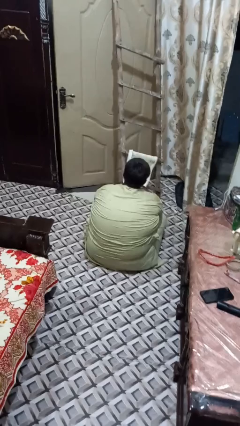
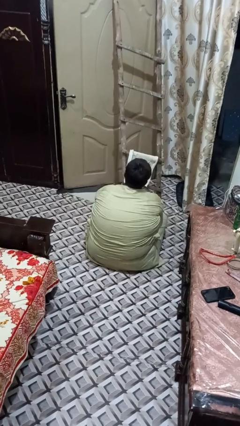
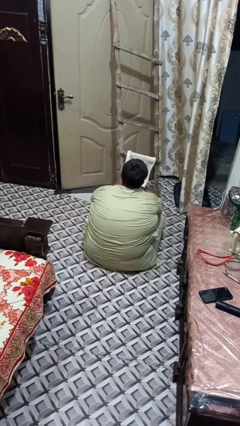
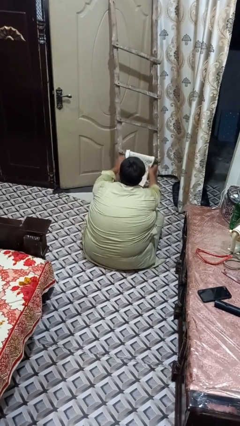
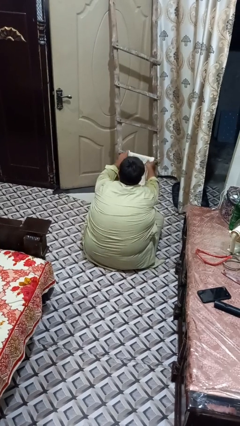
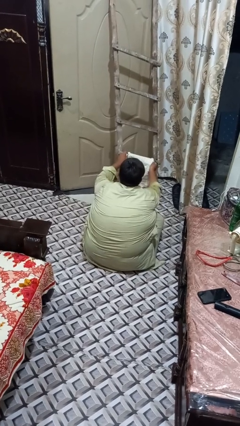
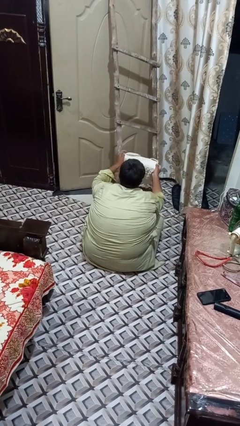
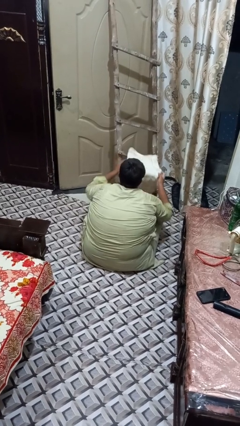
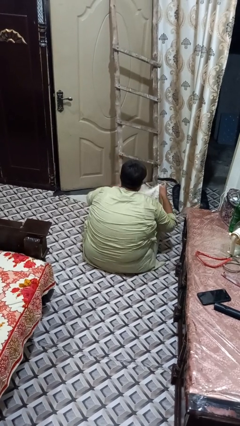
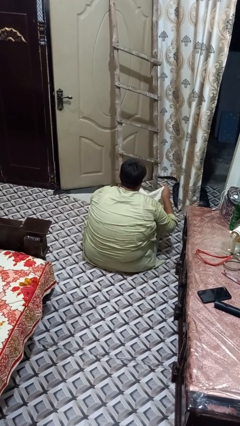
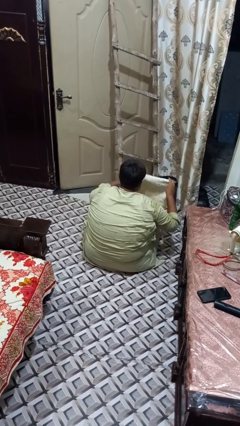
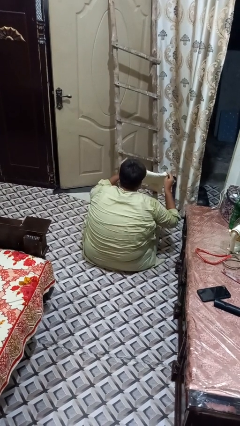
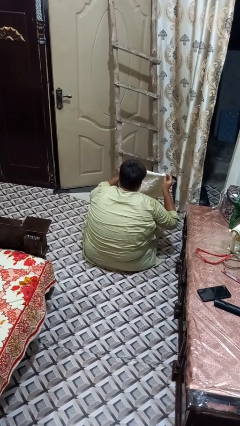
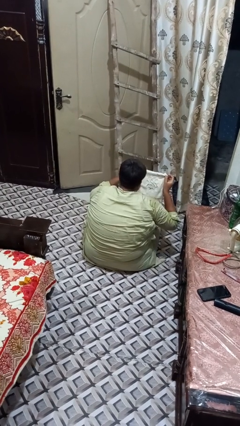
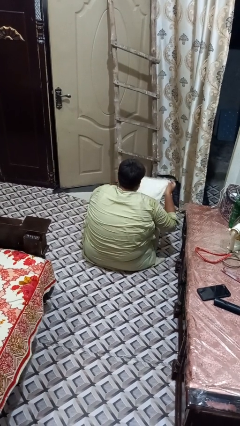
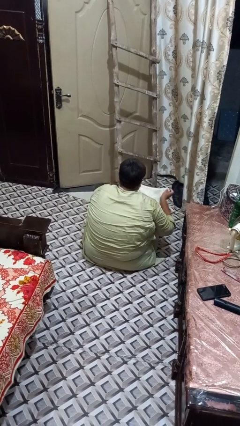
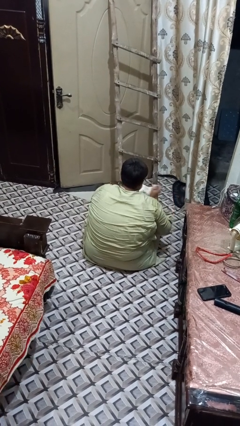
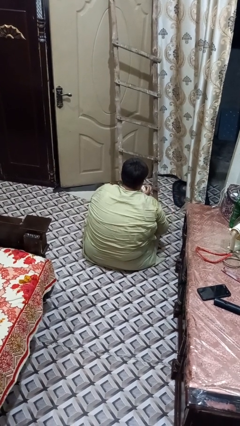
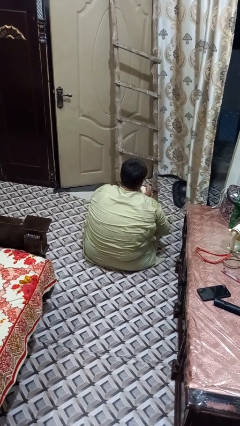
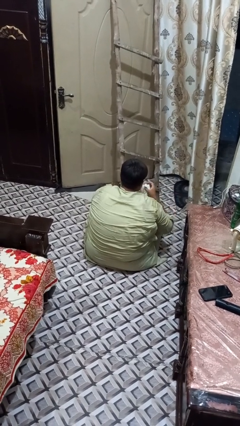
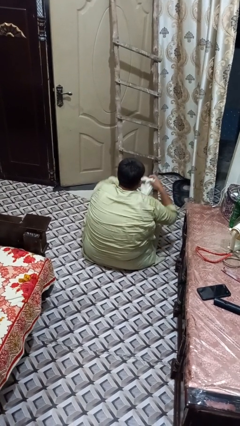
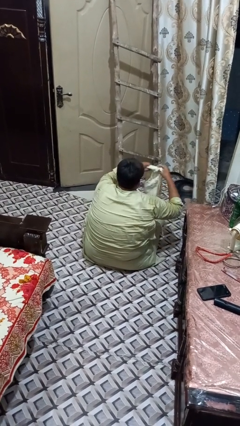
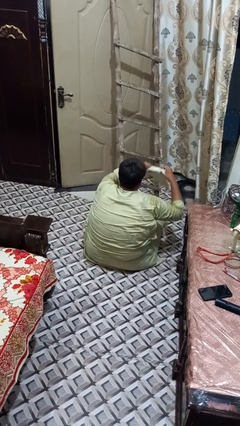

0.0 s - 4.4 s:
person folds towel

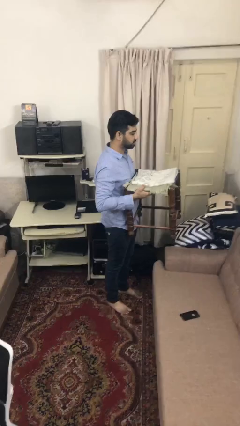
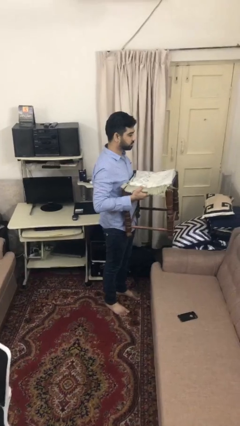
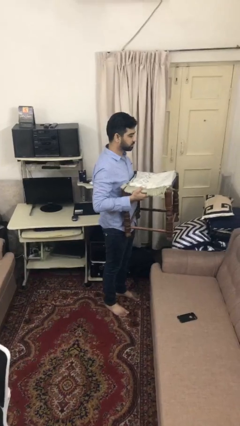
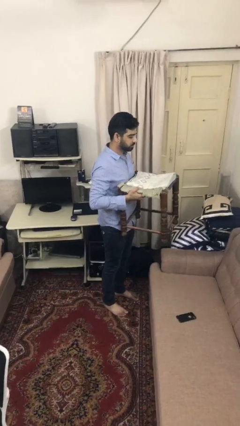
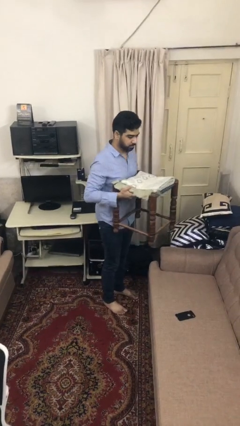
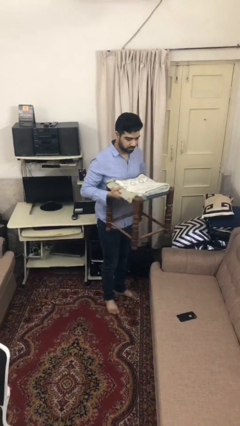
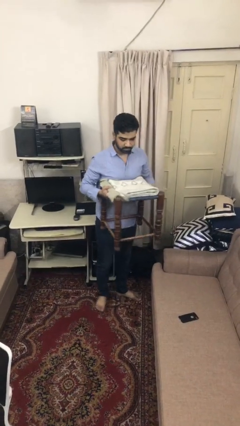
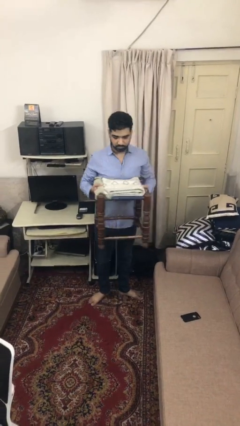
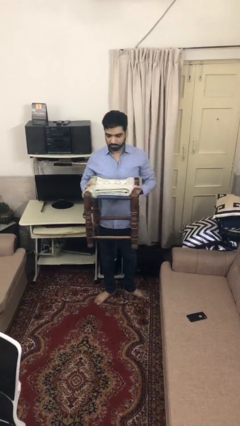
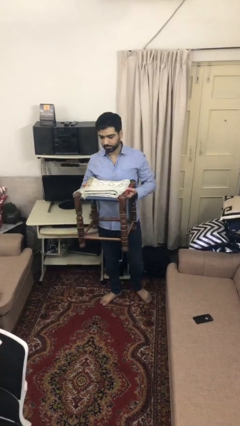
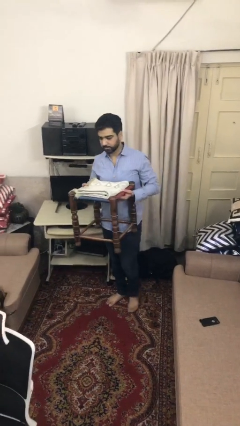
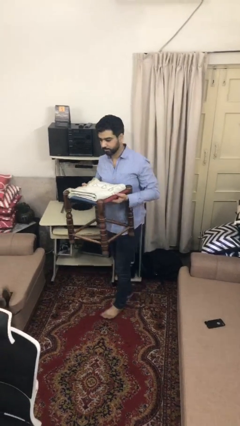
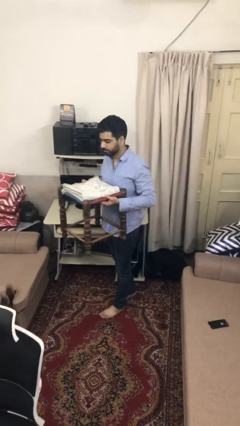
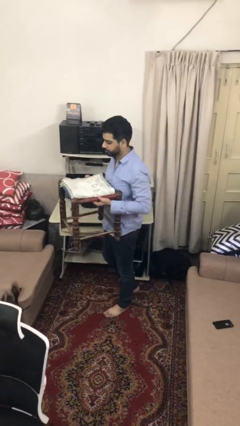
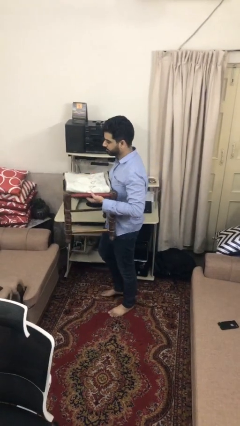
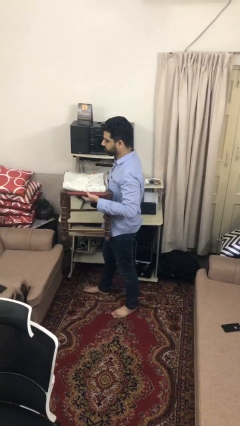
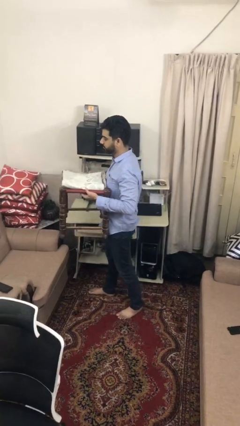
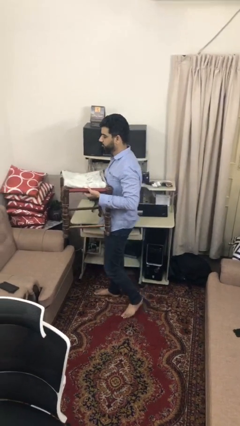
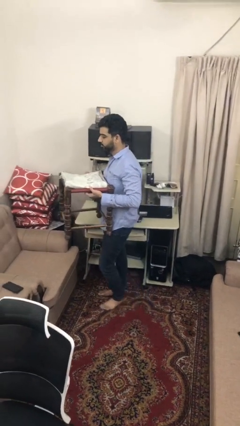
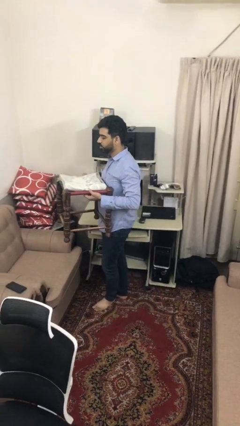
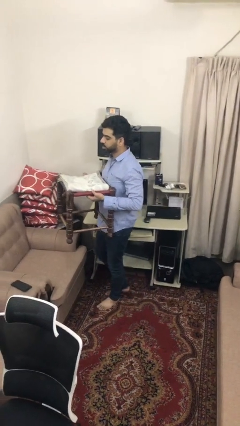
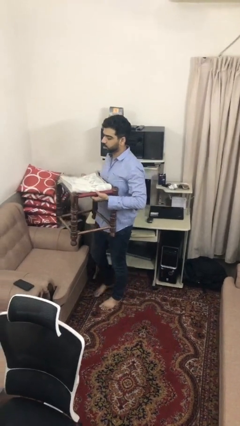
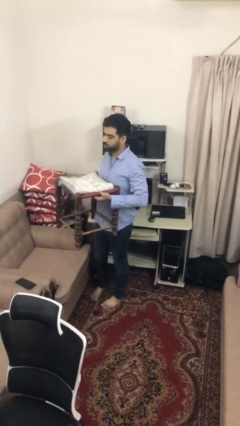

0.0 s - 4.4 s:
person carries furniture

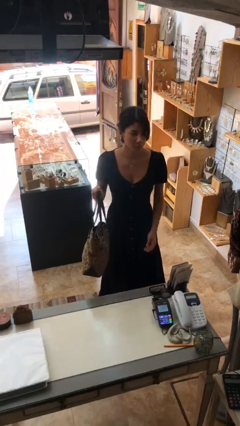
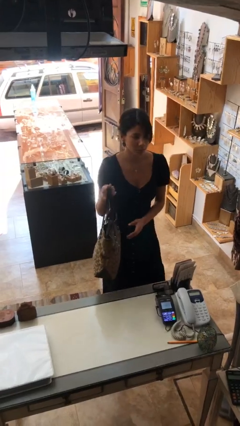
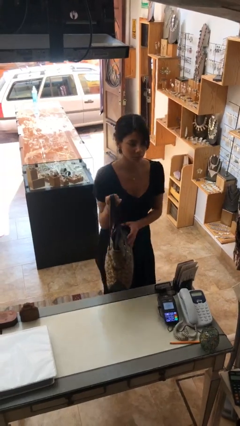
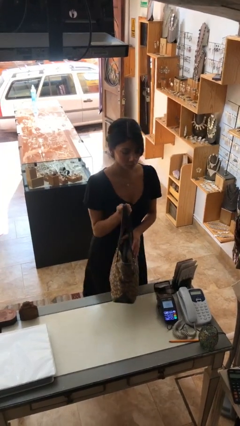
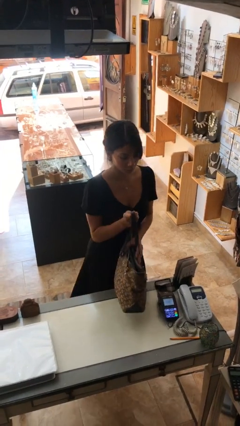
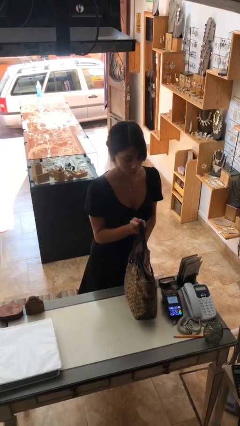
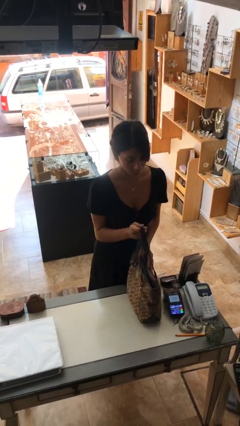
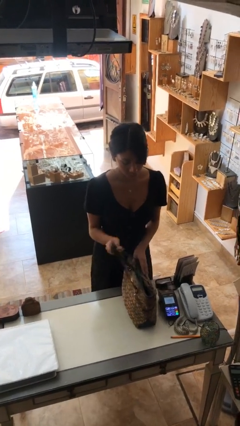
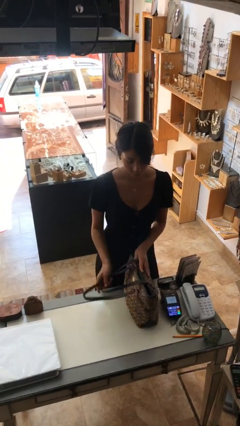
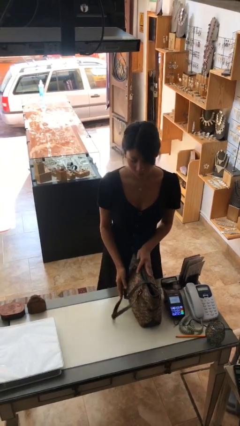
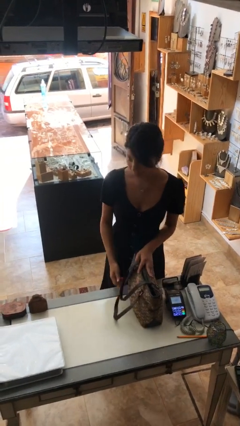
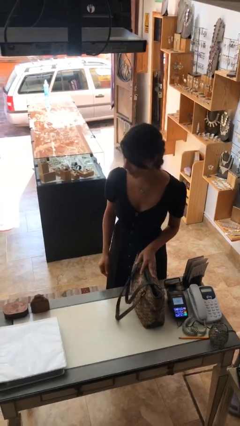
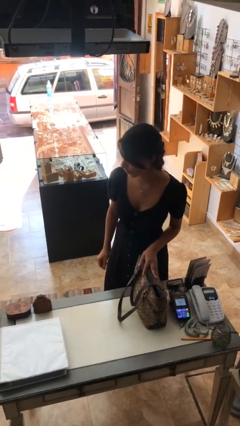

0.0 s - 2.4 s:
person puts down object on table

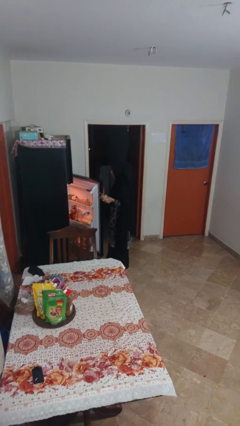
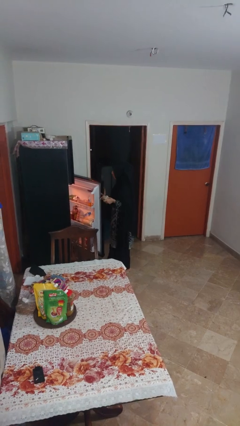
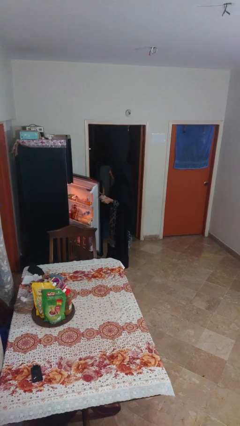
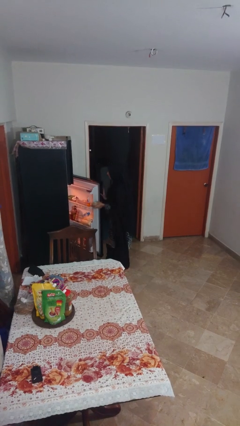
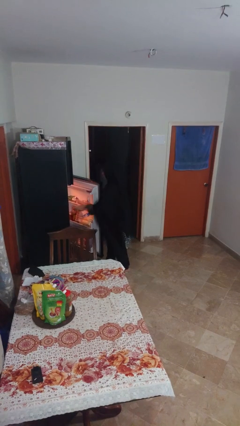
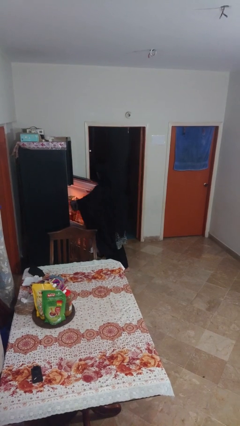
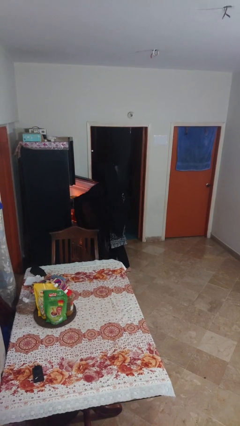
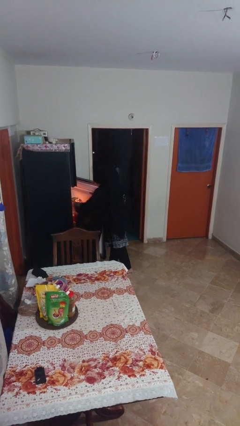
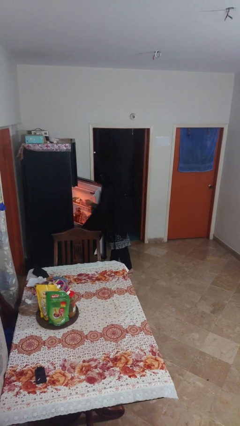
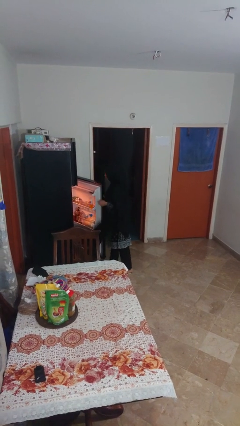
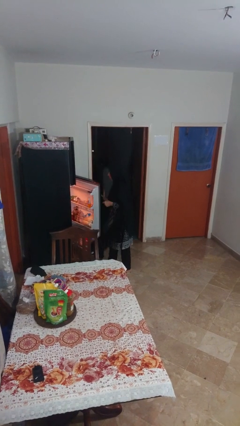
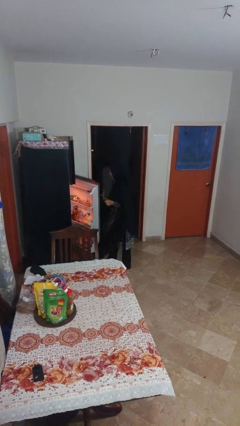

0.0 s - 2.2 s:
person puts object into refrigerator

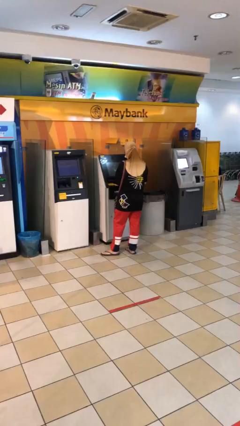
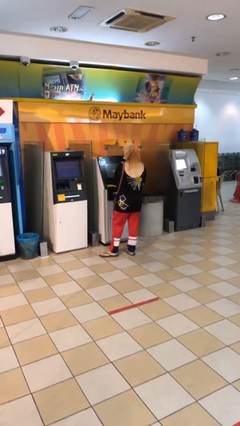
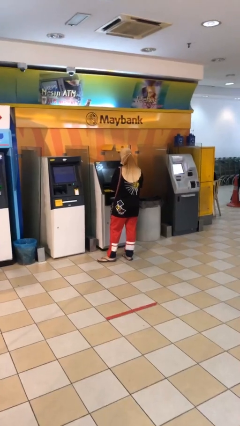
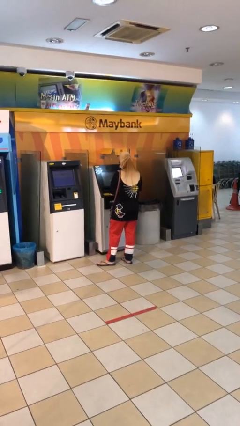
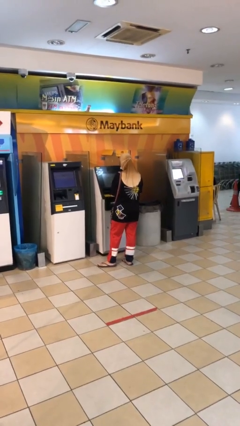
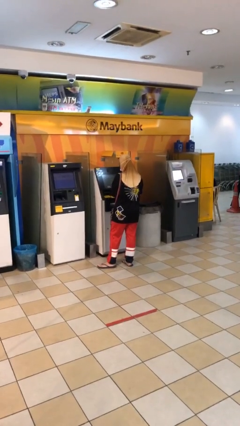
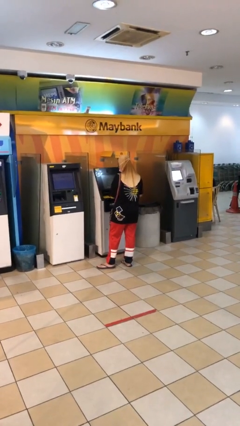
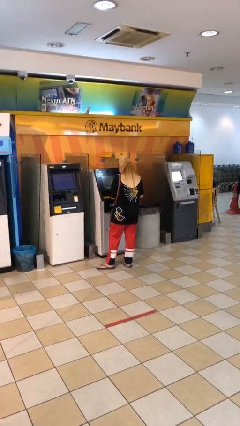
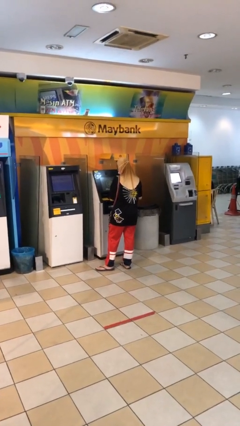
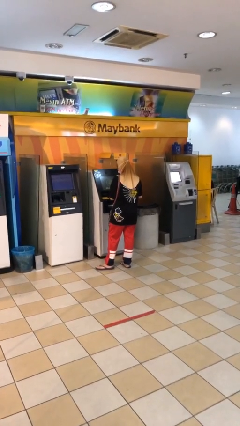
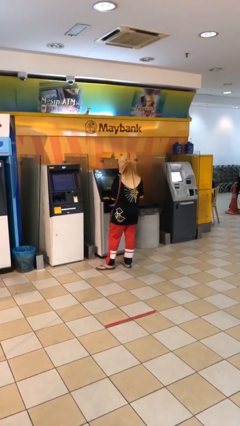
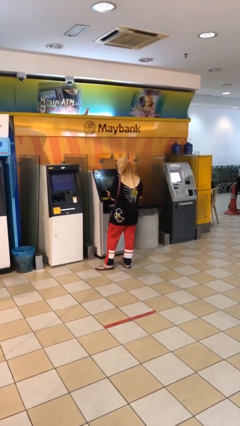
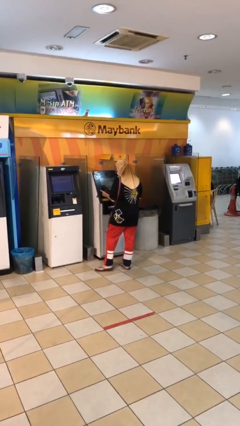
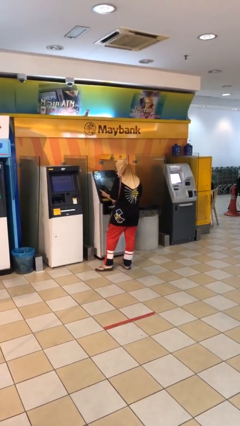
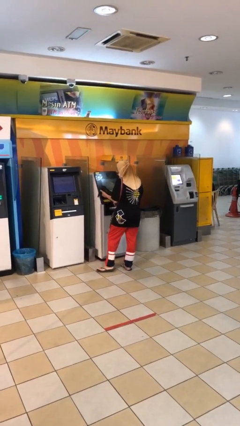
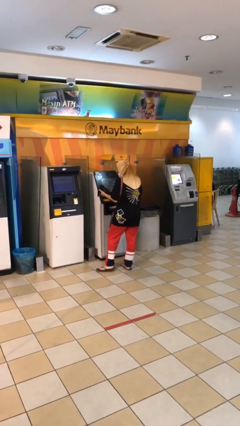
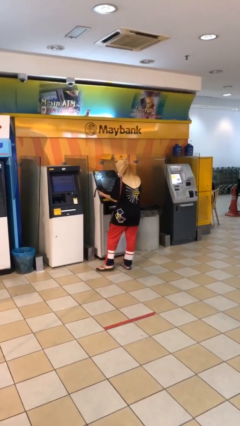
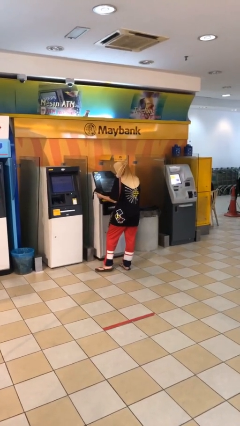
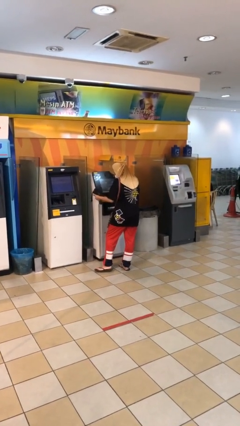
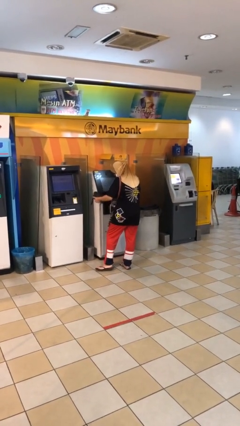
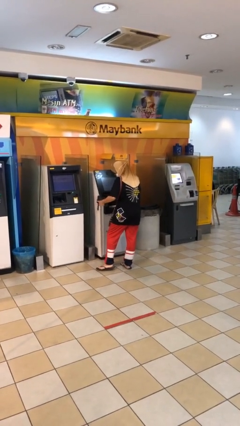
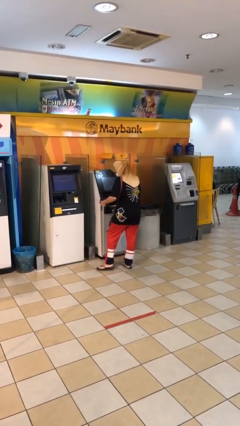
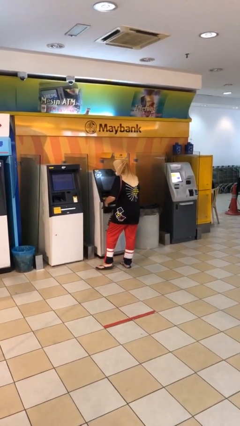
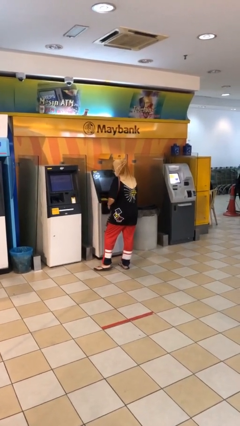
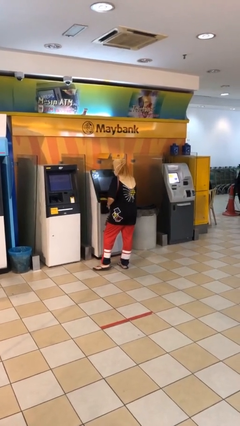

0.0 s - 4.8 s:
person purchases from machine
